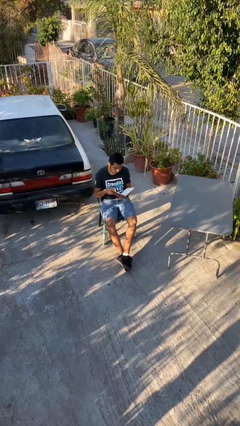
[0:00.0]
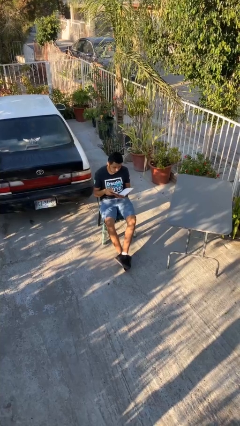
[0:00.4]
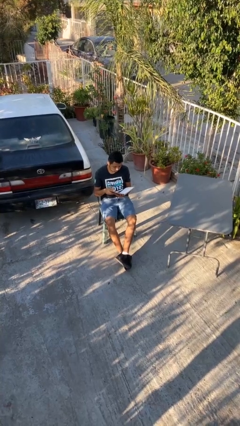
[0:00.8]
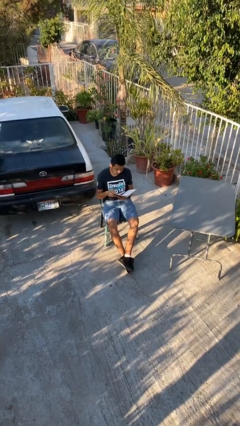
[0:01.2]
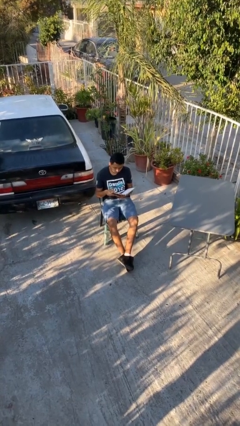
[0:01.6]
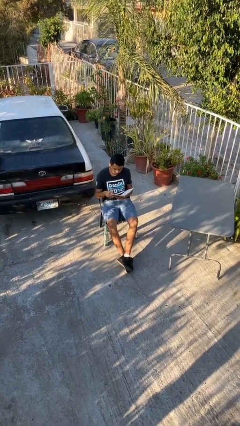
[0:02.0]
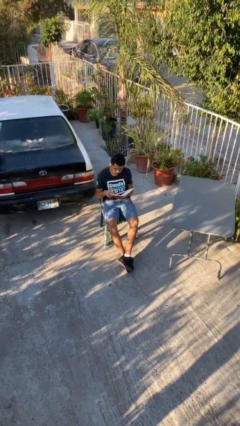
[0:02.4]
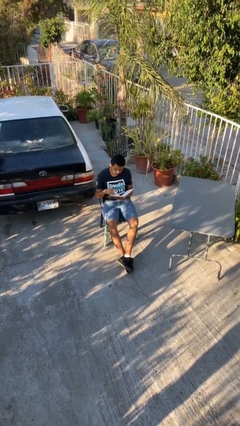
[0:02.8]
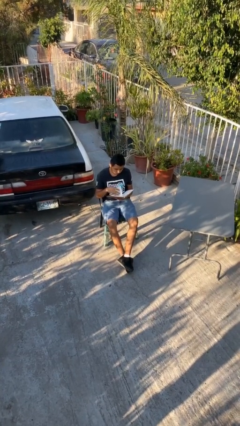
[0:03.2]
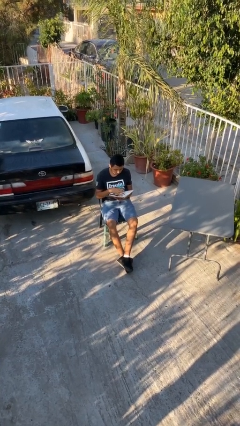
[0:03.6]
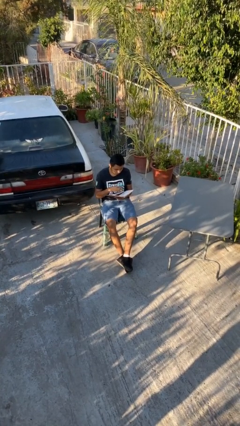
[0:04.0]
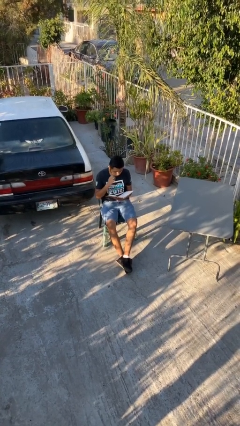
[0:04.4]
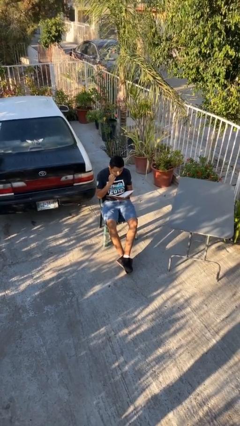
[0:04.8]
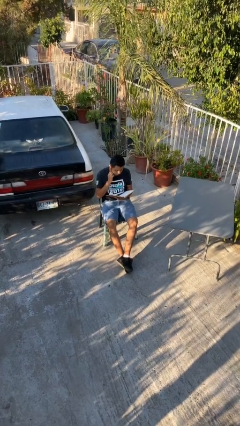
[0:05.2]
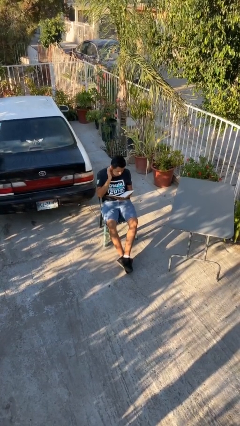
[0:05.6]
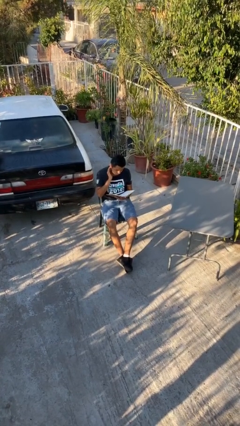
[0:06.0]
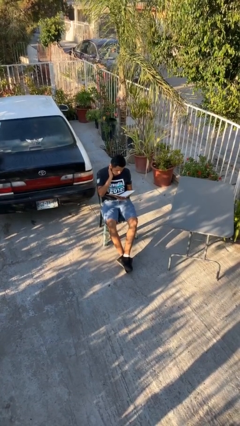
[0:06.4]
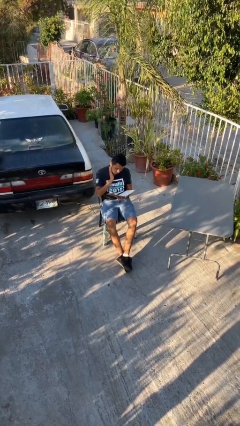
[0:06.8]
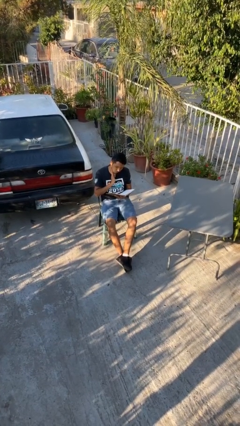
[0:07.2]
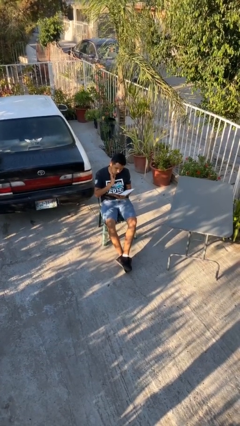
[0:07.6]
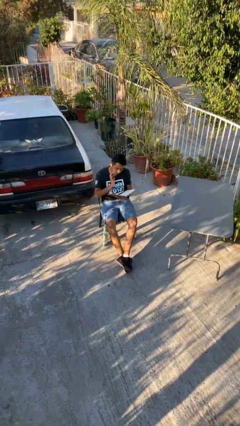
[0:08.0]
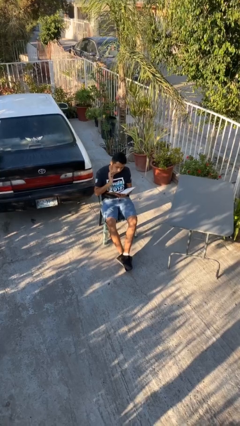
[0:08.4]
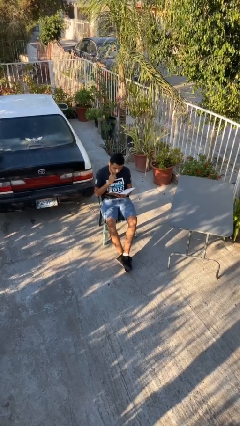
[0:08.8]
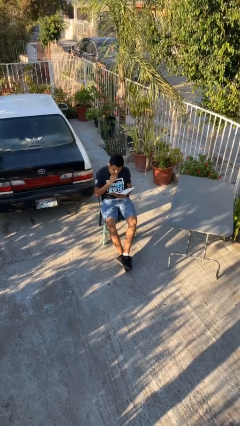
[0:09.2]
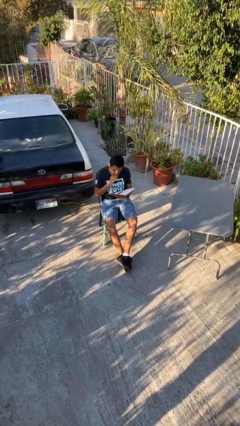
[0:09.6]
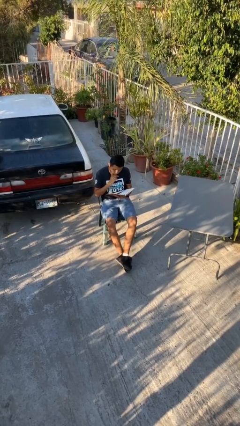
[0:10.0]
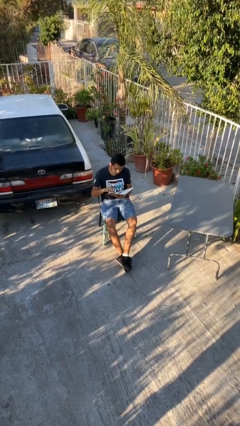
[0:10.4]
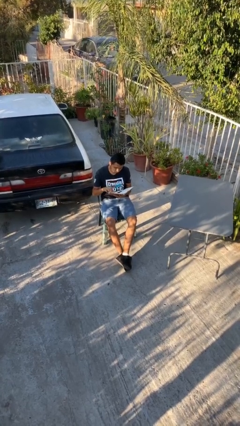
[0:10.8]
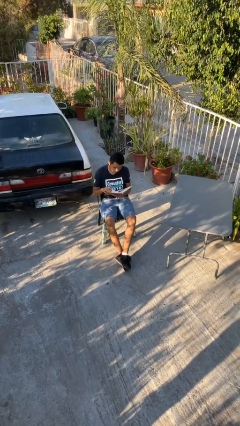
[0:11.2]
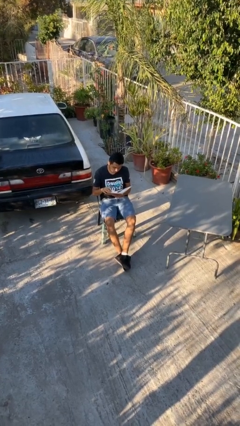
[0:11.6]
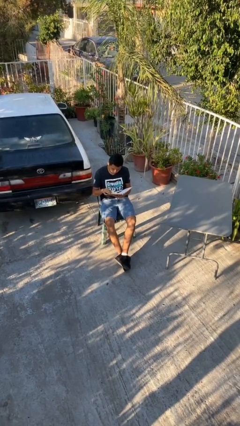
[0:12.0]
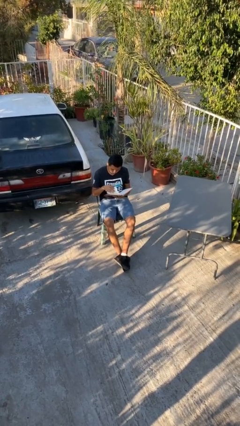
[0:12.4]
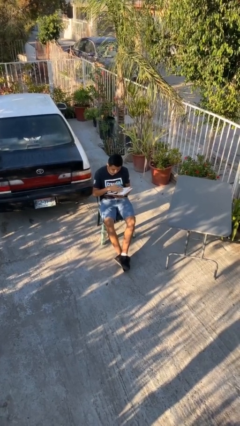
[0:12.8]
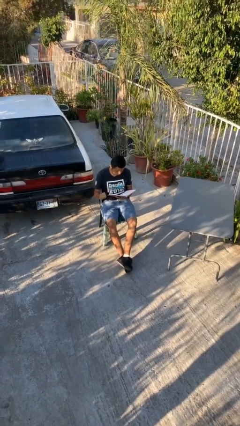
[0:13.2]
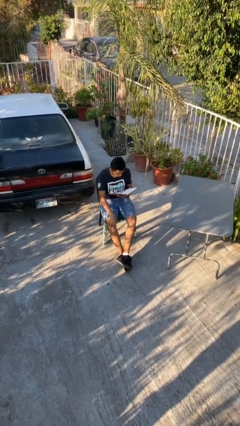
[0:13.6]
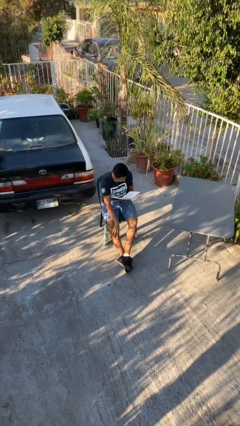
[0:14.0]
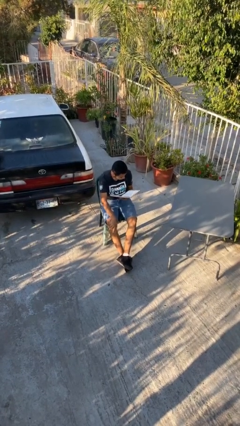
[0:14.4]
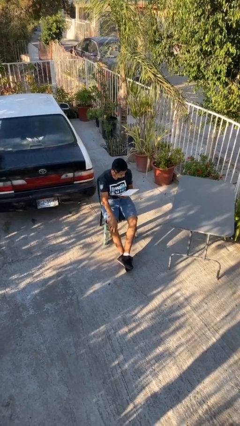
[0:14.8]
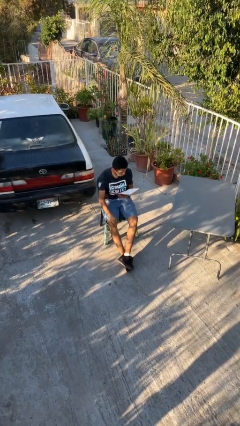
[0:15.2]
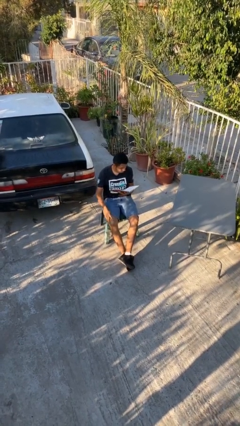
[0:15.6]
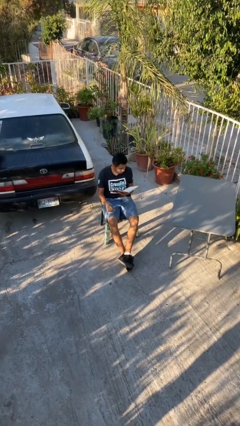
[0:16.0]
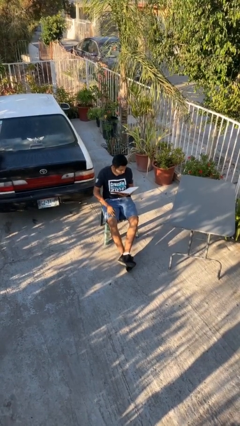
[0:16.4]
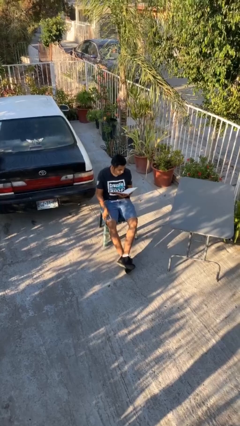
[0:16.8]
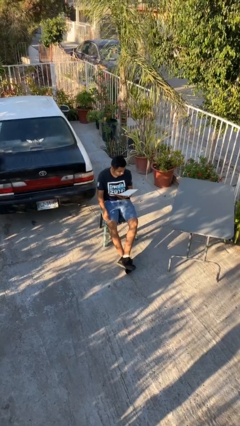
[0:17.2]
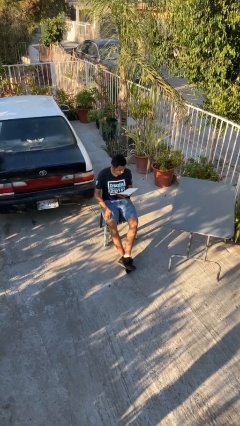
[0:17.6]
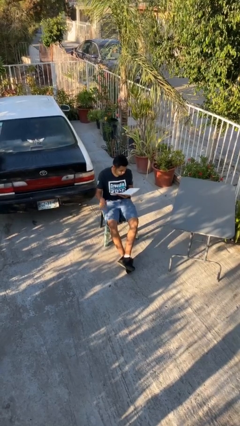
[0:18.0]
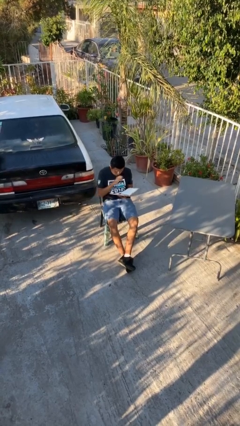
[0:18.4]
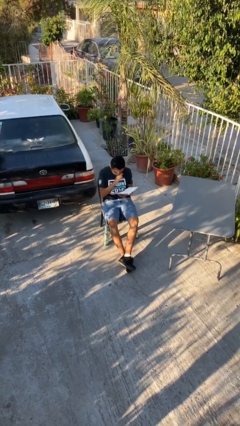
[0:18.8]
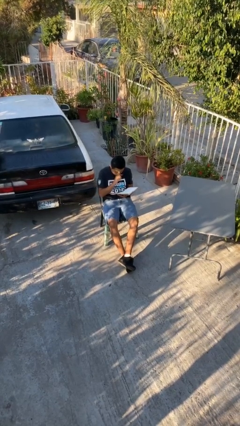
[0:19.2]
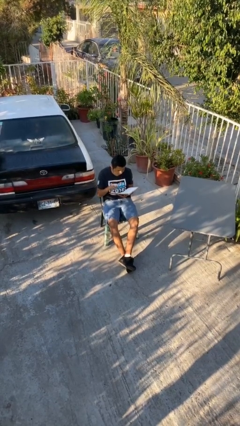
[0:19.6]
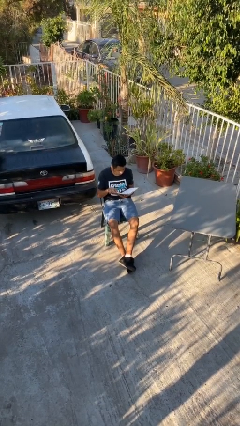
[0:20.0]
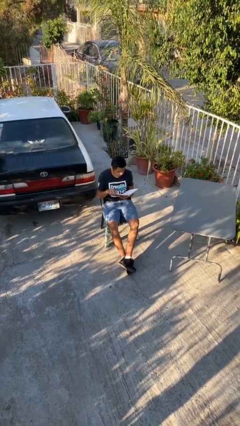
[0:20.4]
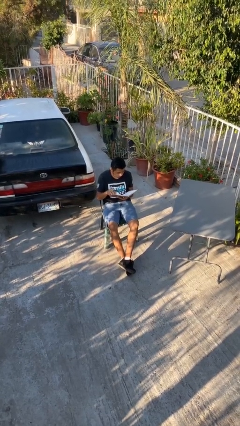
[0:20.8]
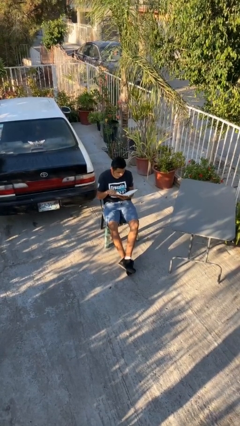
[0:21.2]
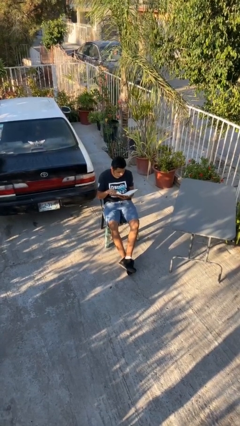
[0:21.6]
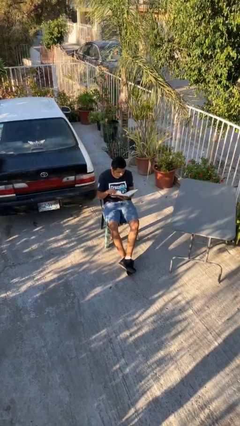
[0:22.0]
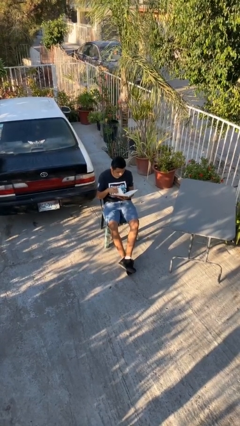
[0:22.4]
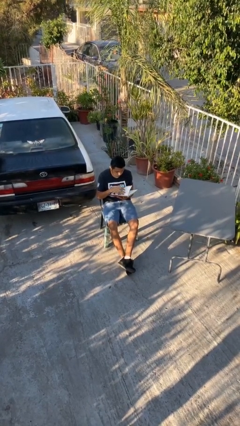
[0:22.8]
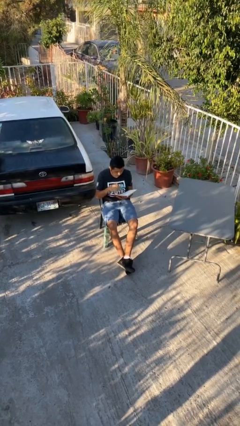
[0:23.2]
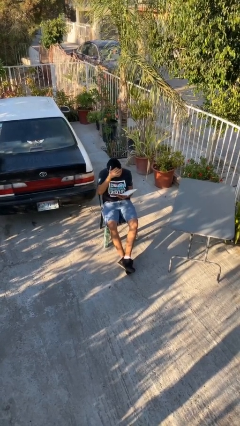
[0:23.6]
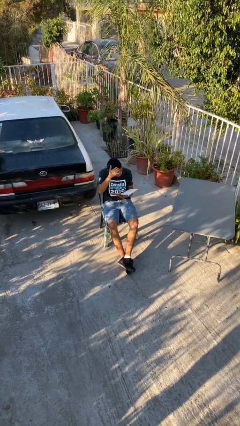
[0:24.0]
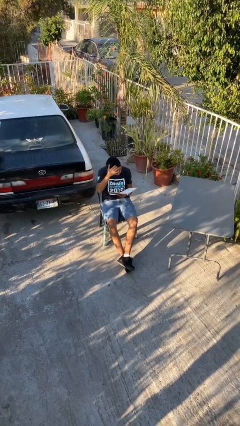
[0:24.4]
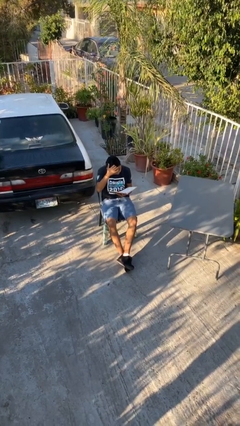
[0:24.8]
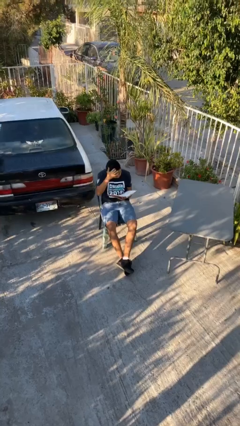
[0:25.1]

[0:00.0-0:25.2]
person reads document

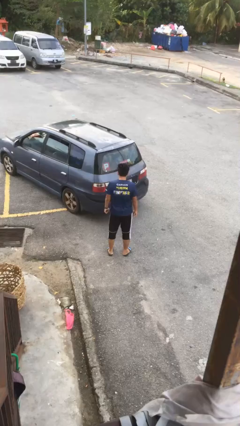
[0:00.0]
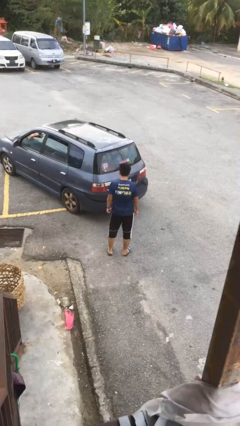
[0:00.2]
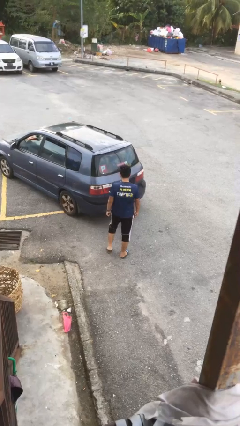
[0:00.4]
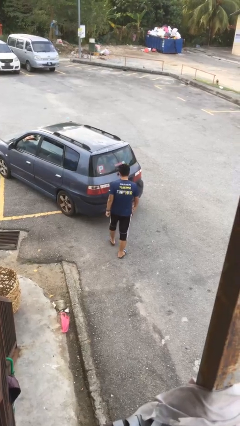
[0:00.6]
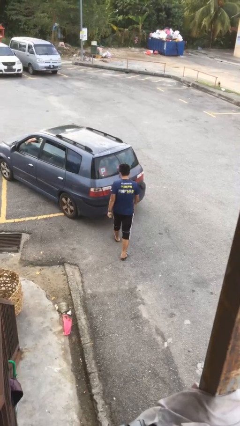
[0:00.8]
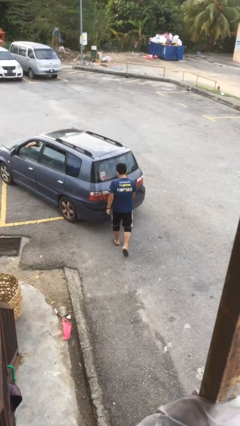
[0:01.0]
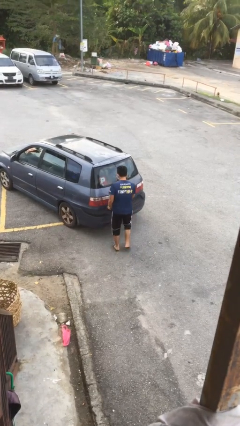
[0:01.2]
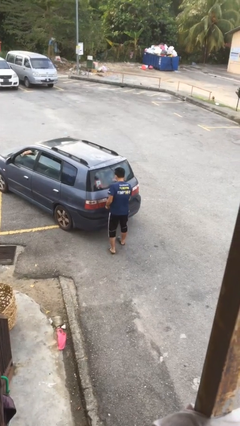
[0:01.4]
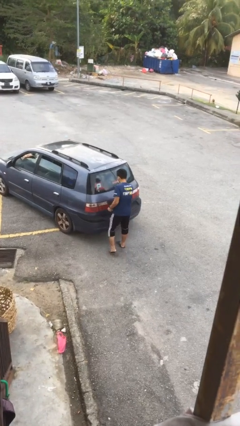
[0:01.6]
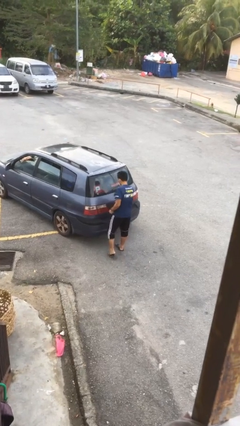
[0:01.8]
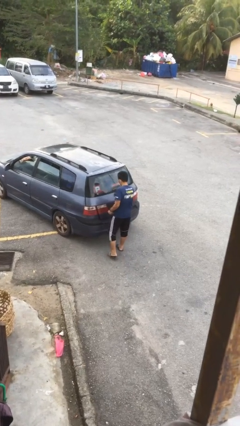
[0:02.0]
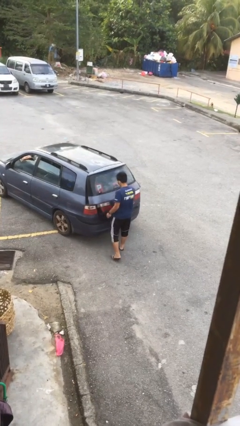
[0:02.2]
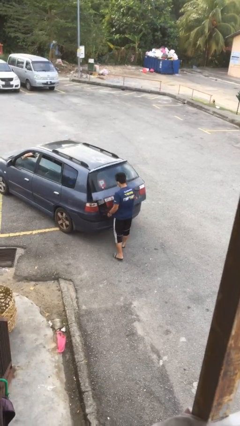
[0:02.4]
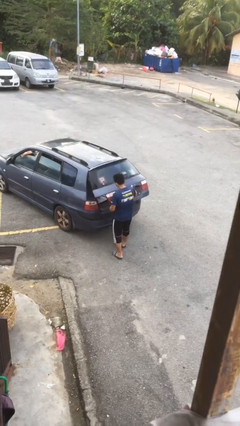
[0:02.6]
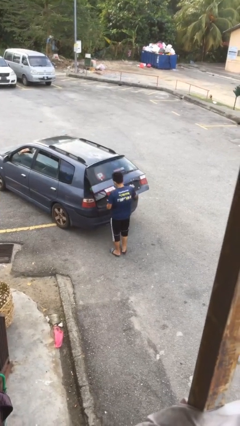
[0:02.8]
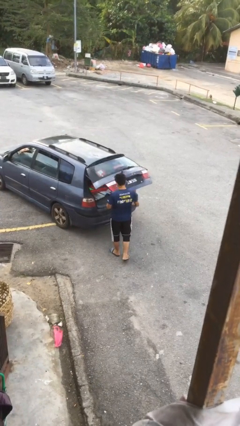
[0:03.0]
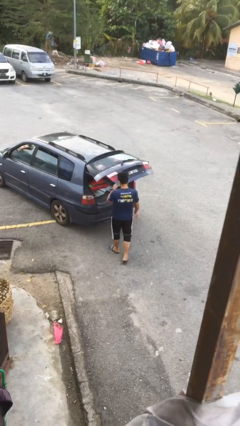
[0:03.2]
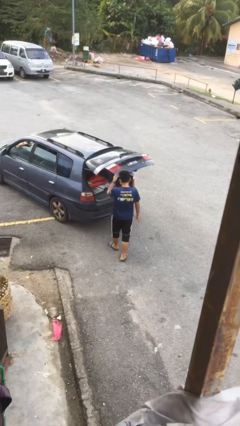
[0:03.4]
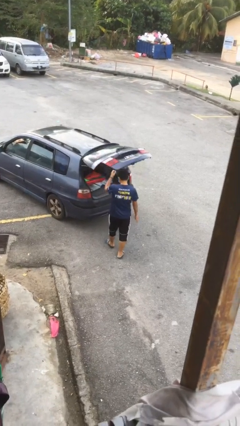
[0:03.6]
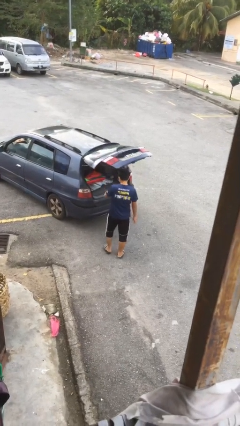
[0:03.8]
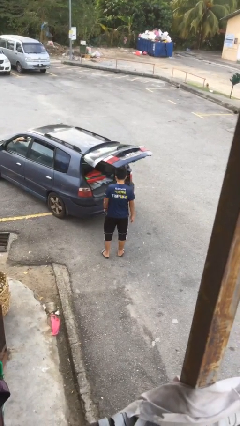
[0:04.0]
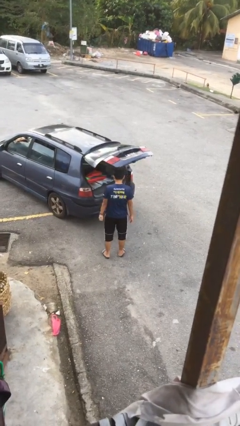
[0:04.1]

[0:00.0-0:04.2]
person opens car trunk

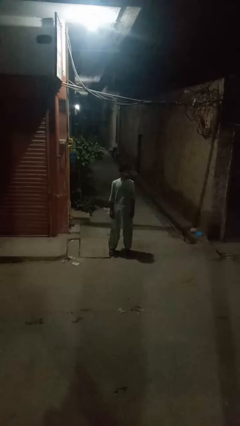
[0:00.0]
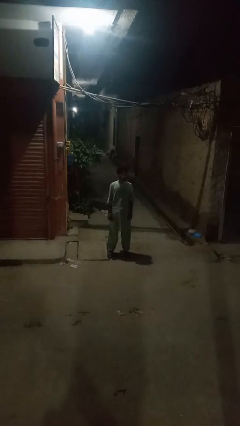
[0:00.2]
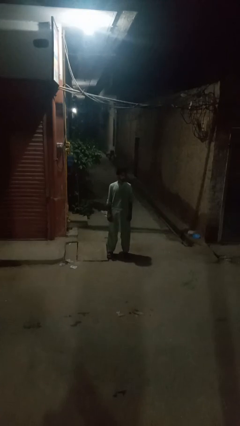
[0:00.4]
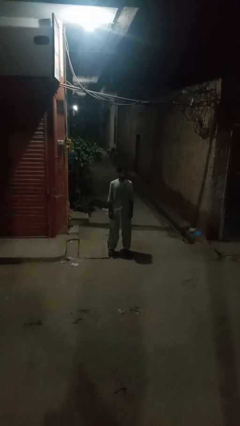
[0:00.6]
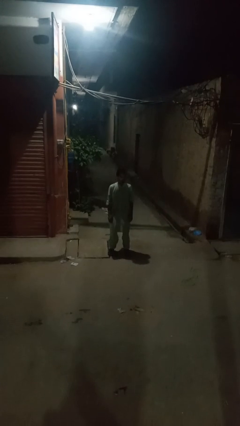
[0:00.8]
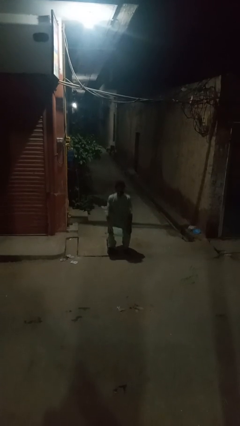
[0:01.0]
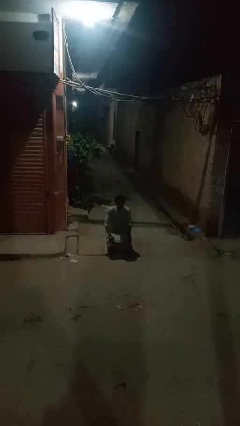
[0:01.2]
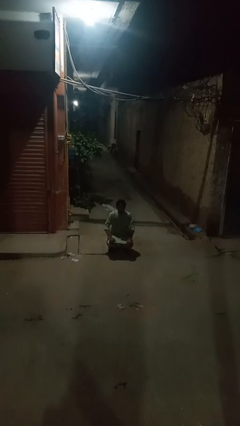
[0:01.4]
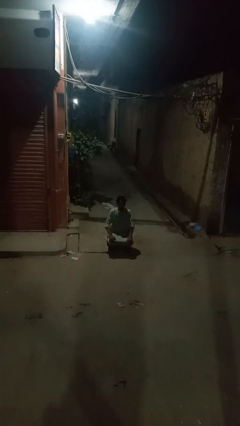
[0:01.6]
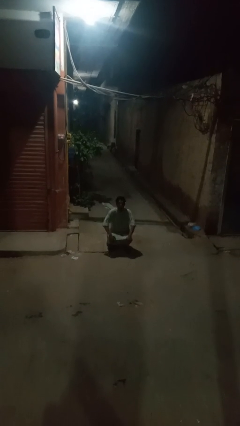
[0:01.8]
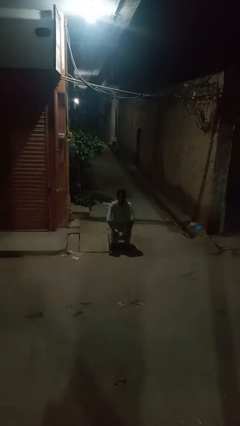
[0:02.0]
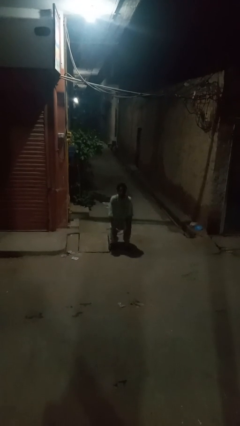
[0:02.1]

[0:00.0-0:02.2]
person exercises with situp
